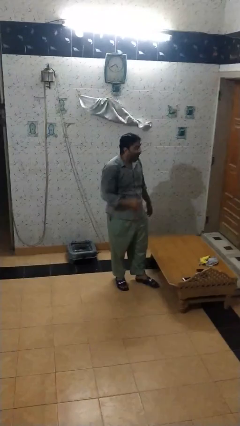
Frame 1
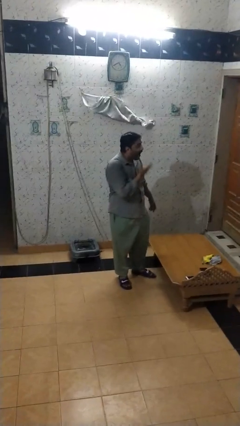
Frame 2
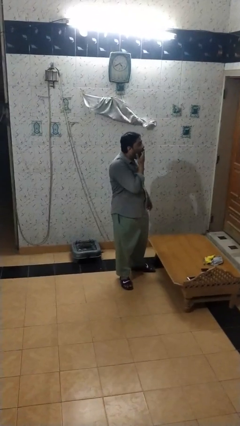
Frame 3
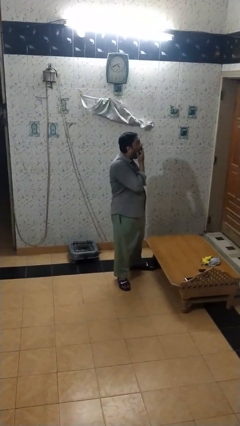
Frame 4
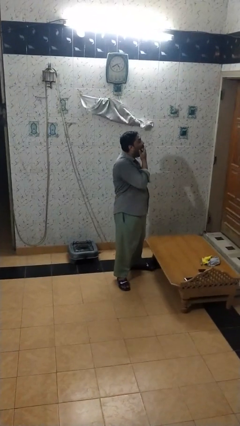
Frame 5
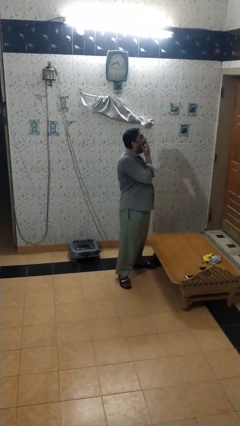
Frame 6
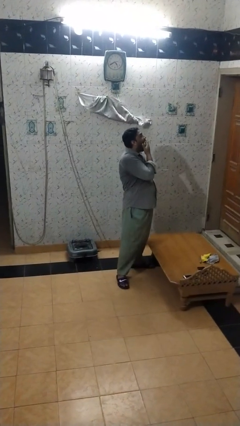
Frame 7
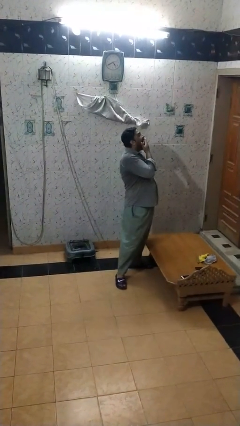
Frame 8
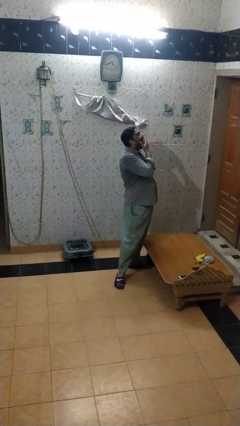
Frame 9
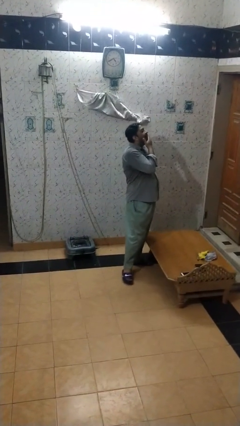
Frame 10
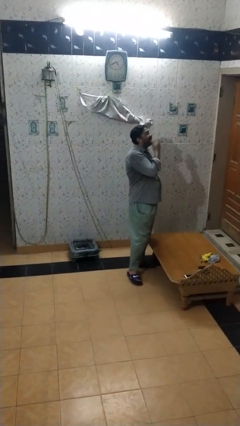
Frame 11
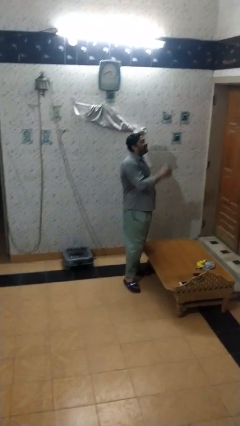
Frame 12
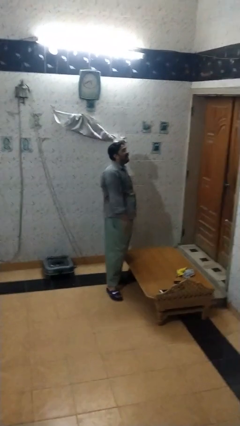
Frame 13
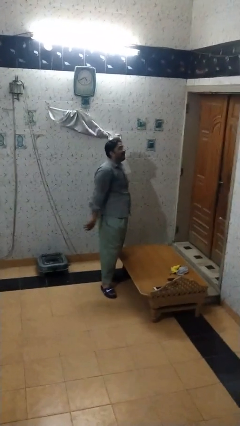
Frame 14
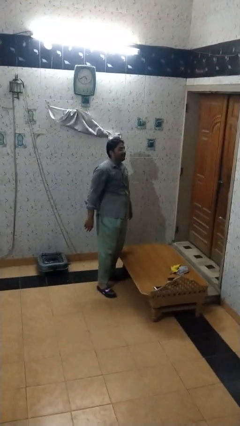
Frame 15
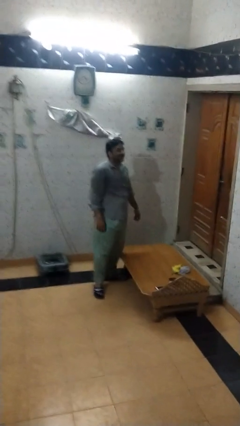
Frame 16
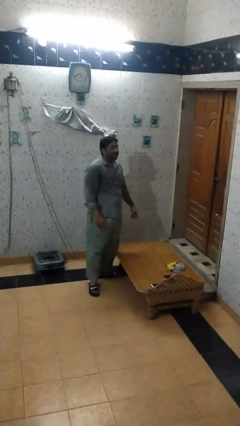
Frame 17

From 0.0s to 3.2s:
person yawns

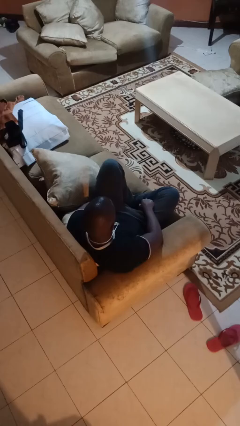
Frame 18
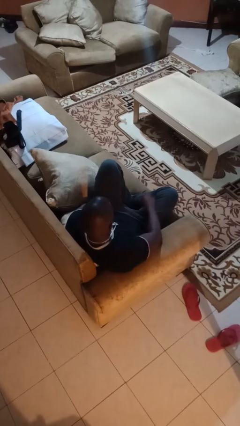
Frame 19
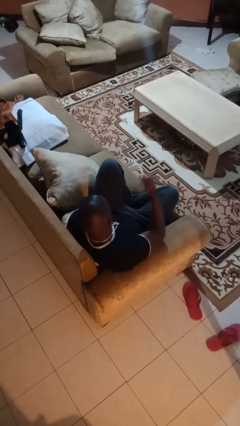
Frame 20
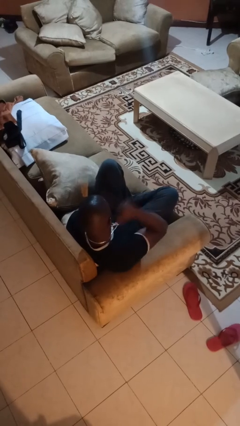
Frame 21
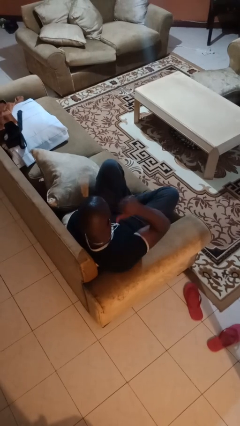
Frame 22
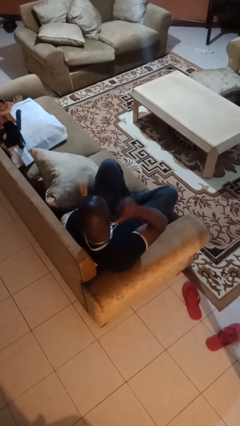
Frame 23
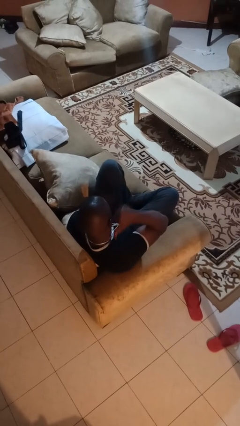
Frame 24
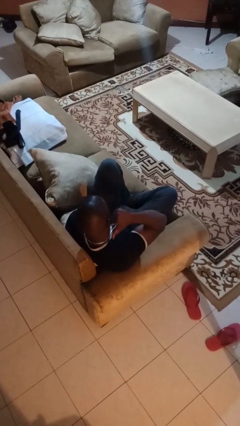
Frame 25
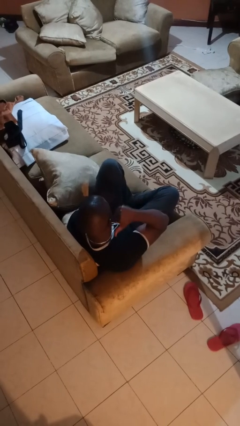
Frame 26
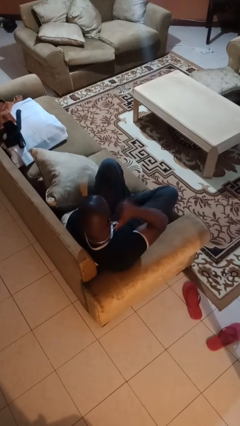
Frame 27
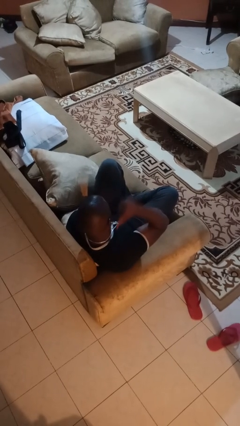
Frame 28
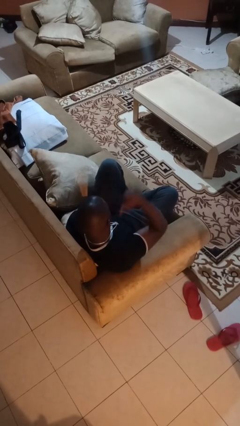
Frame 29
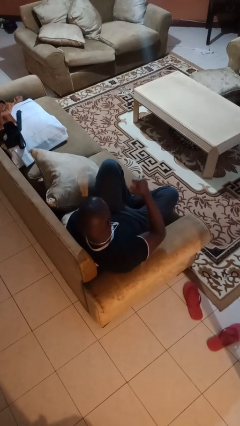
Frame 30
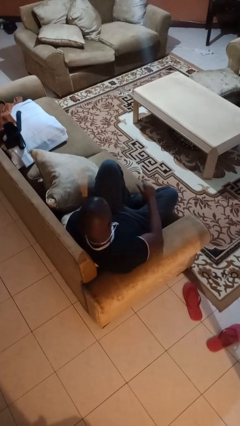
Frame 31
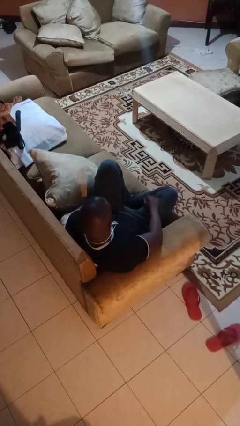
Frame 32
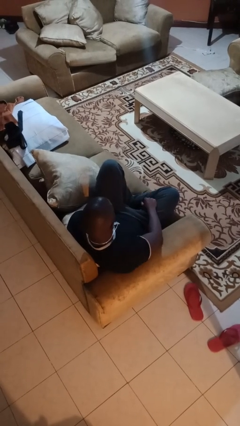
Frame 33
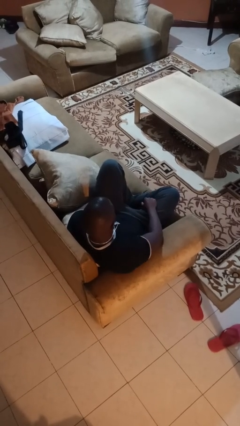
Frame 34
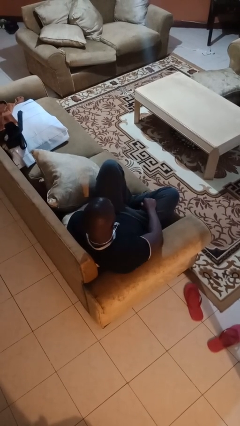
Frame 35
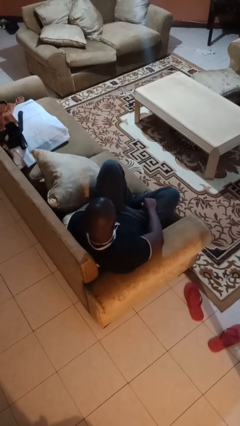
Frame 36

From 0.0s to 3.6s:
person gestures behind me

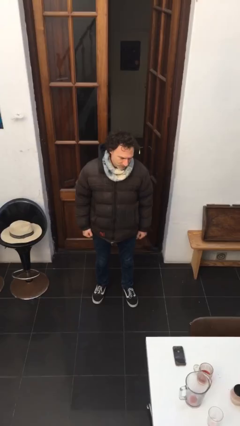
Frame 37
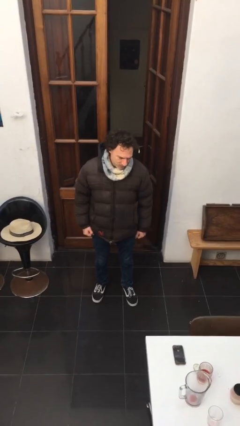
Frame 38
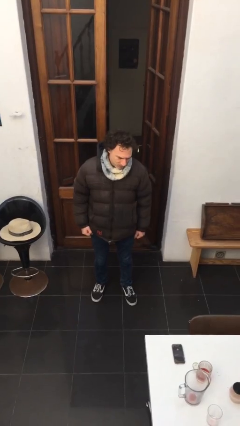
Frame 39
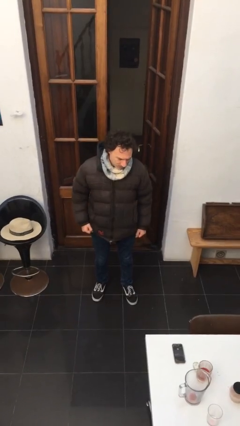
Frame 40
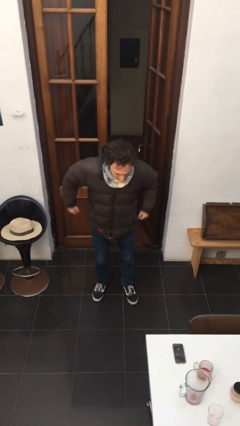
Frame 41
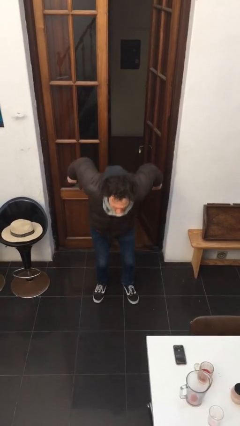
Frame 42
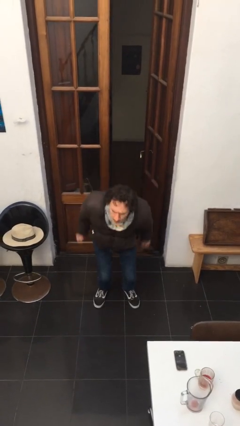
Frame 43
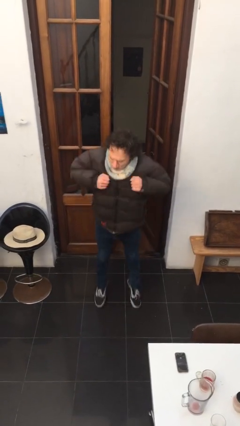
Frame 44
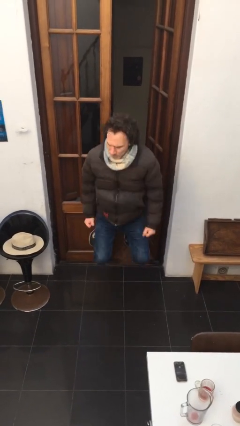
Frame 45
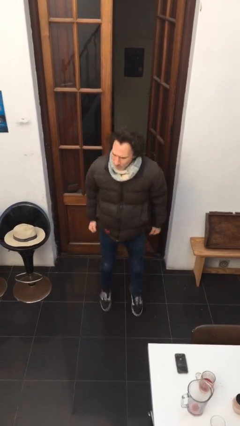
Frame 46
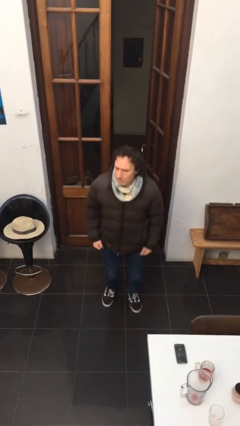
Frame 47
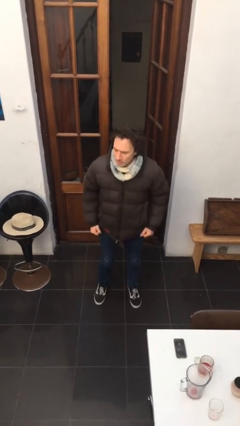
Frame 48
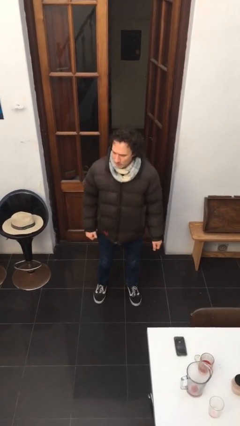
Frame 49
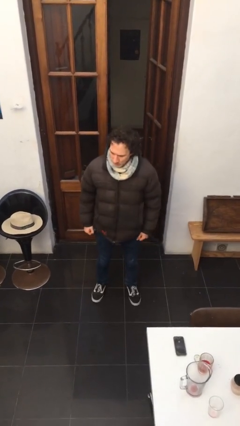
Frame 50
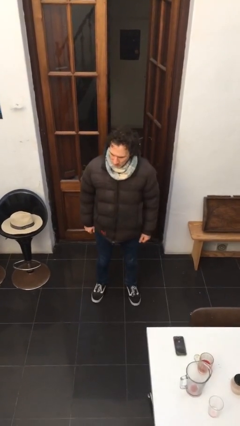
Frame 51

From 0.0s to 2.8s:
person jumps

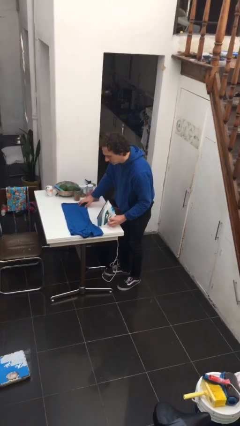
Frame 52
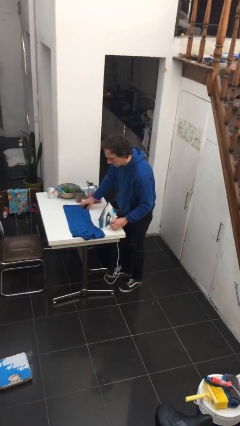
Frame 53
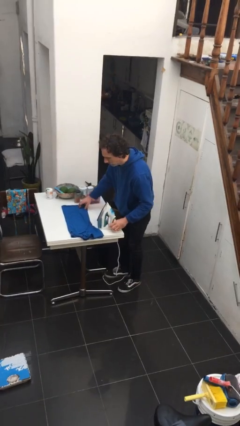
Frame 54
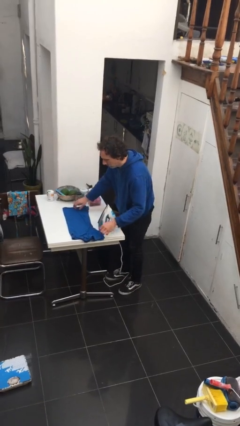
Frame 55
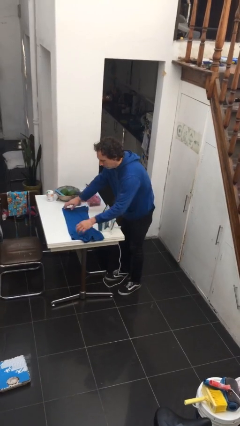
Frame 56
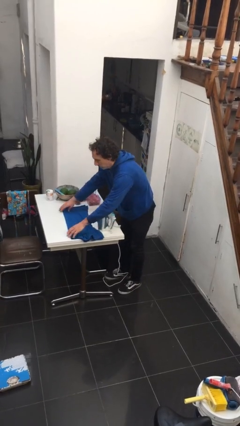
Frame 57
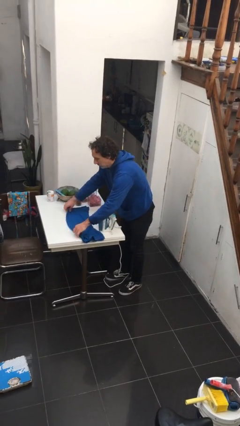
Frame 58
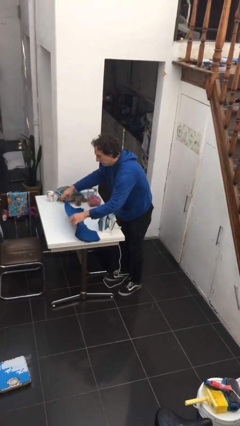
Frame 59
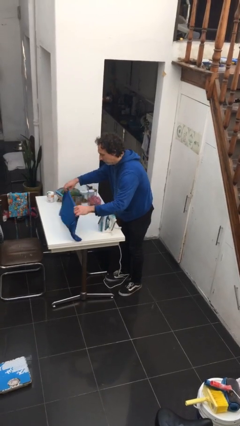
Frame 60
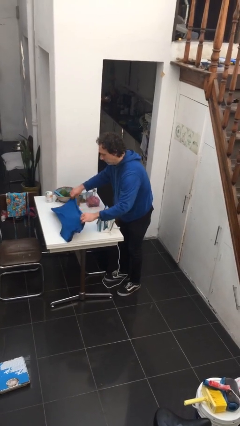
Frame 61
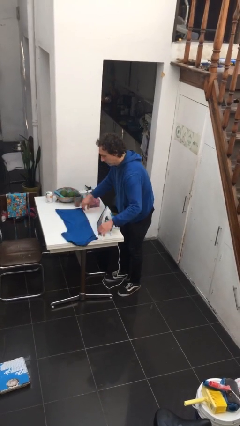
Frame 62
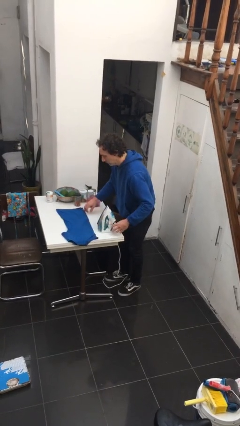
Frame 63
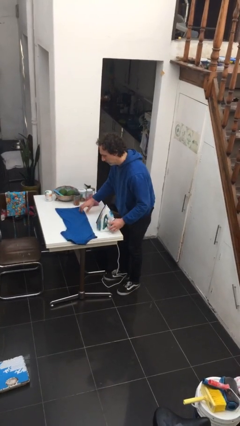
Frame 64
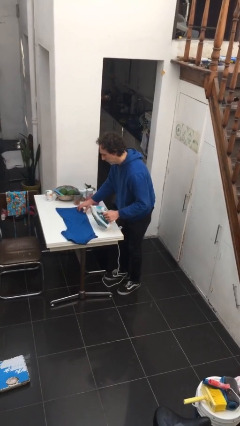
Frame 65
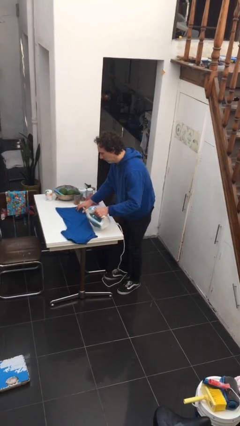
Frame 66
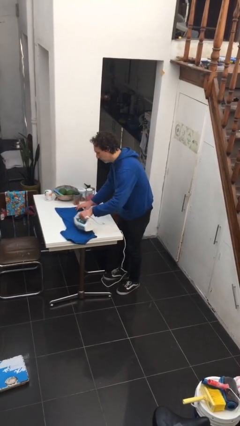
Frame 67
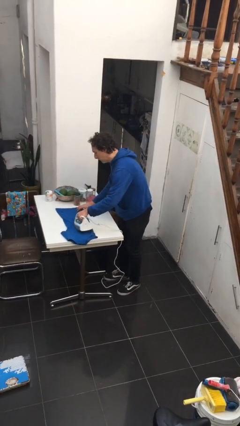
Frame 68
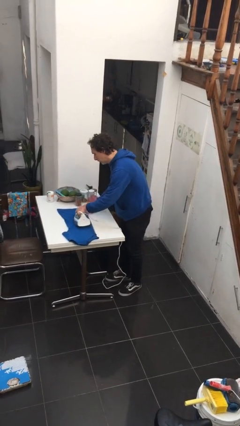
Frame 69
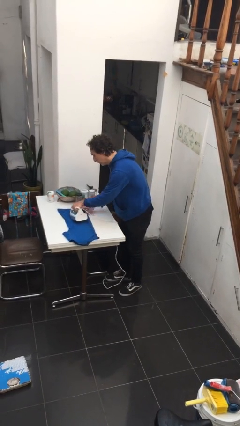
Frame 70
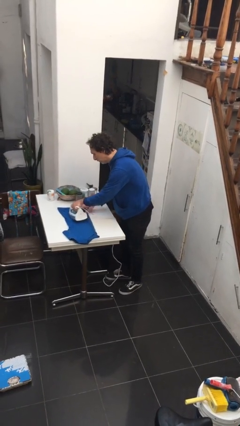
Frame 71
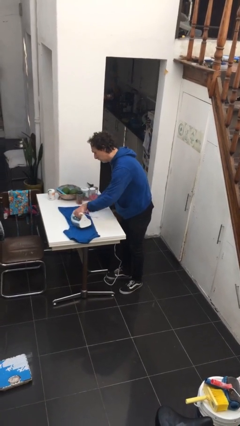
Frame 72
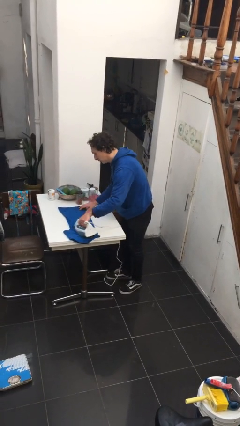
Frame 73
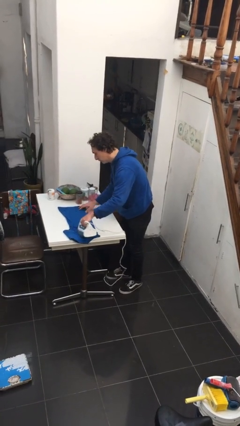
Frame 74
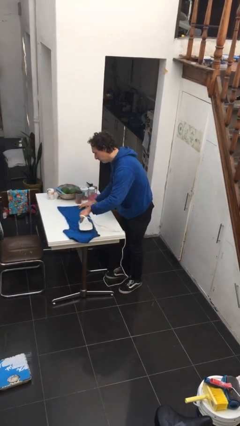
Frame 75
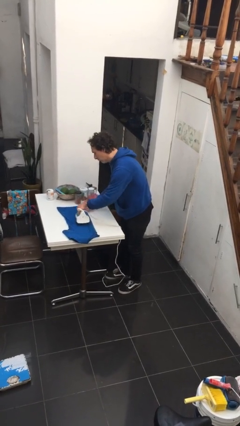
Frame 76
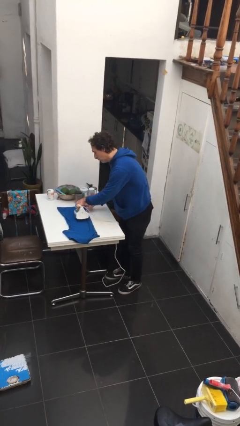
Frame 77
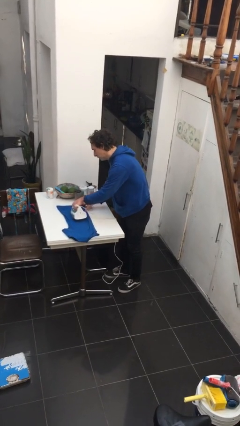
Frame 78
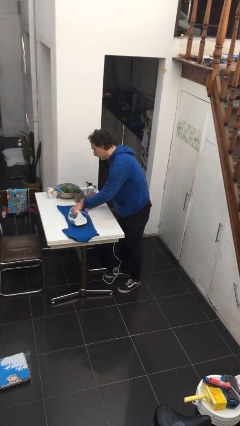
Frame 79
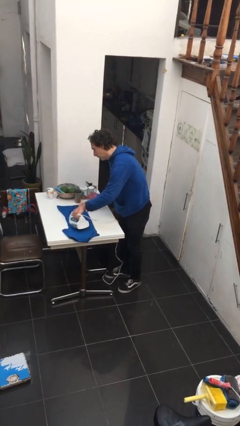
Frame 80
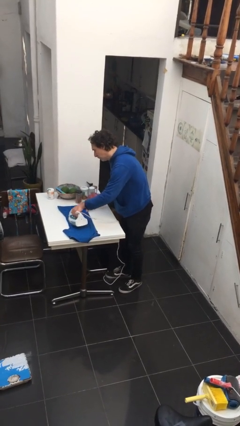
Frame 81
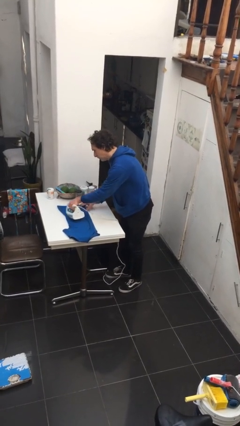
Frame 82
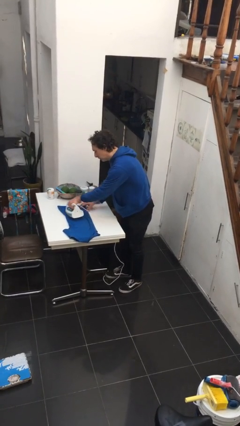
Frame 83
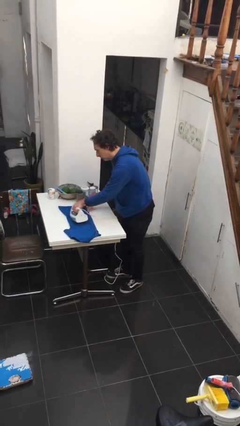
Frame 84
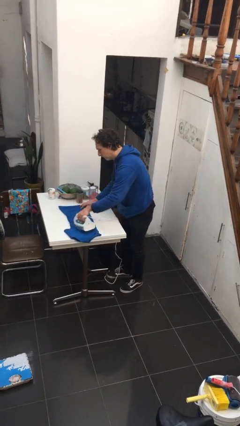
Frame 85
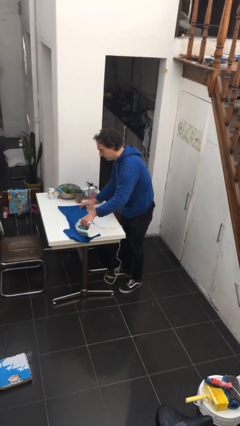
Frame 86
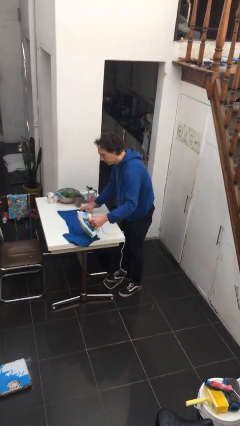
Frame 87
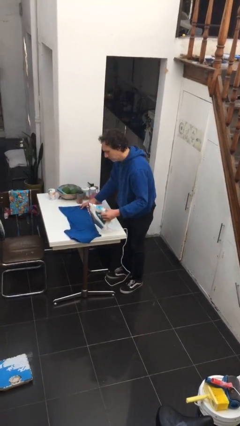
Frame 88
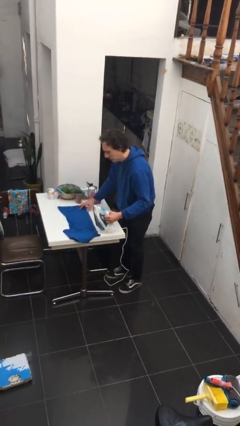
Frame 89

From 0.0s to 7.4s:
person irons clothes

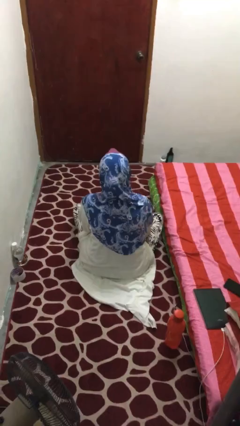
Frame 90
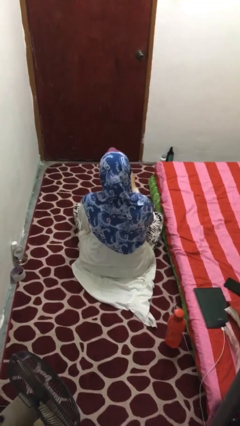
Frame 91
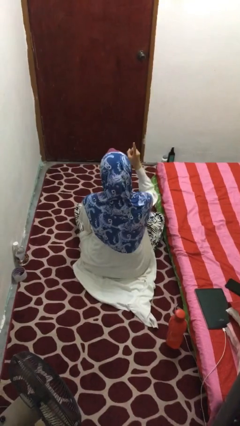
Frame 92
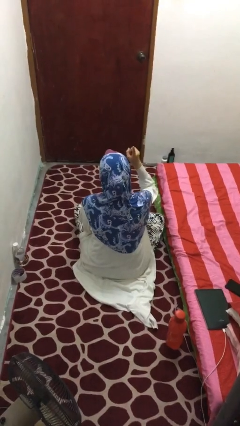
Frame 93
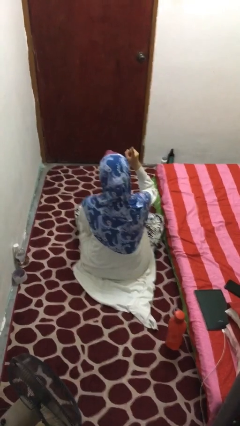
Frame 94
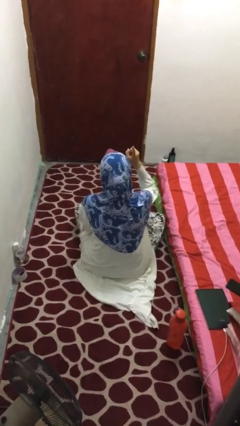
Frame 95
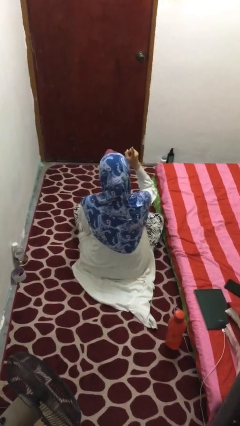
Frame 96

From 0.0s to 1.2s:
person gestures number one
